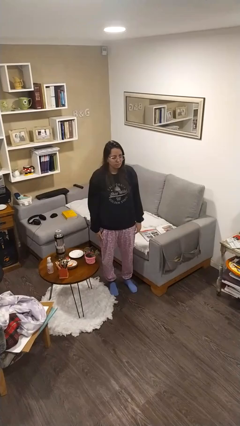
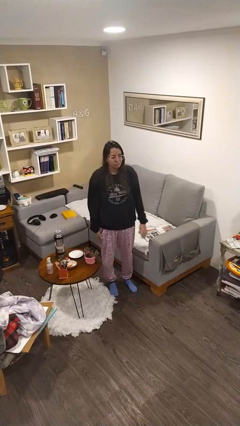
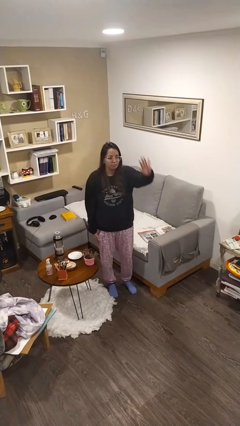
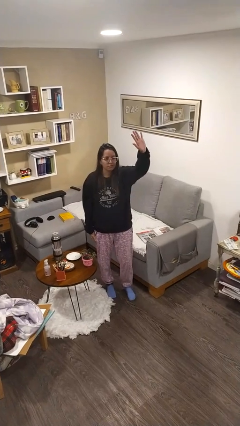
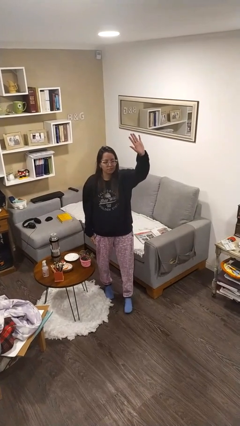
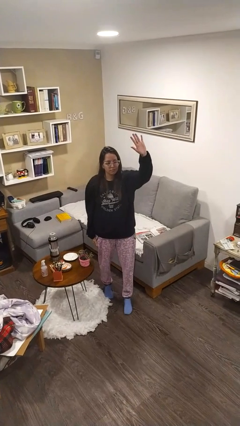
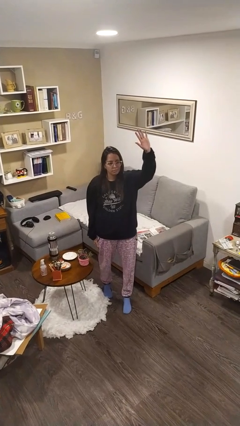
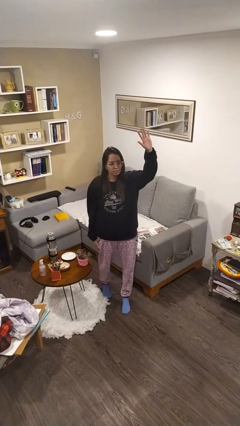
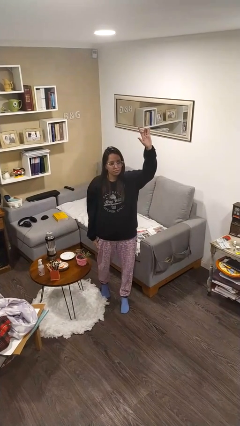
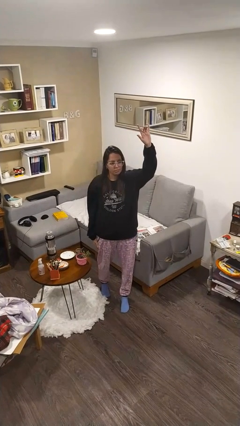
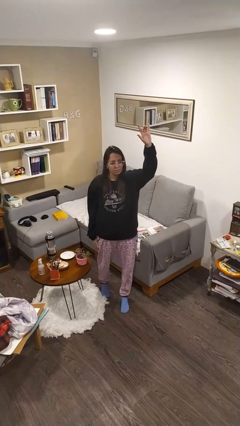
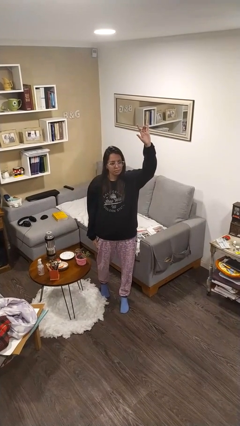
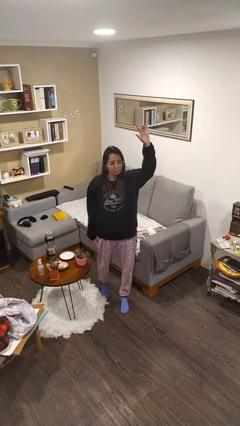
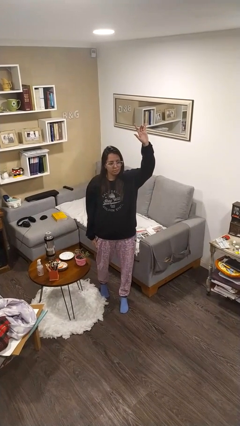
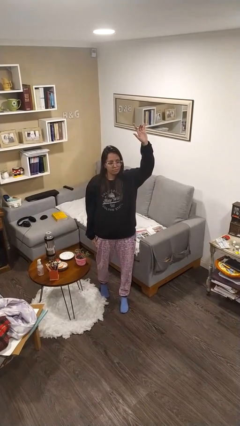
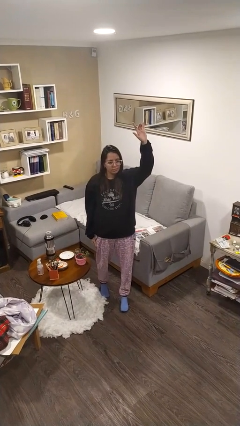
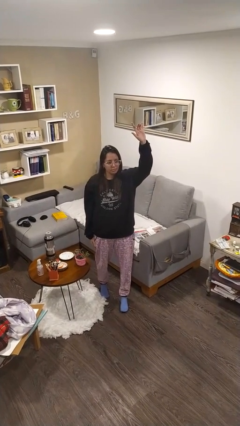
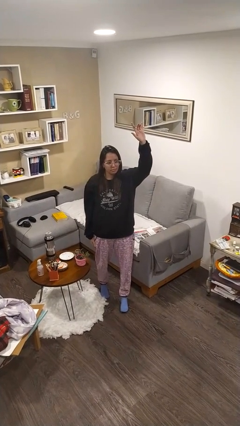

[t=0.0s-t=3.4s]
person gestures raise hand

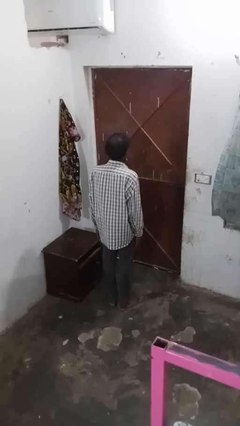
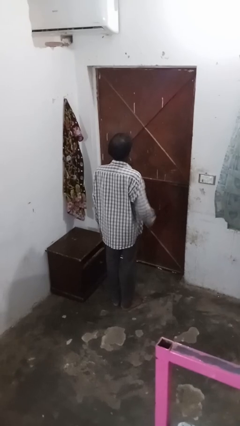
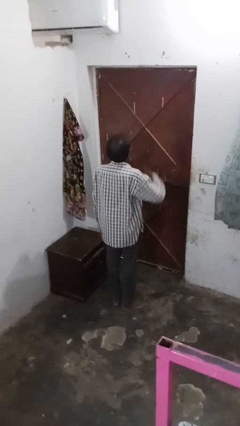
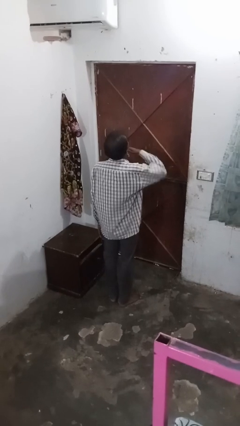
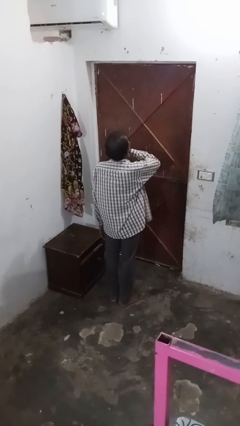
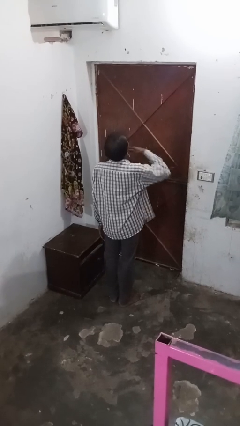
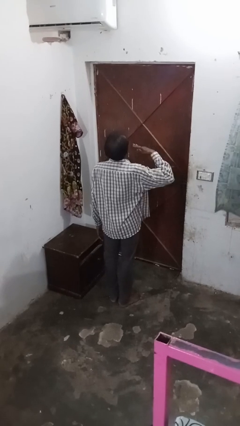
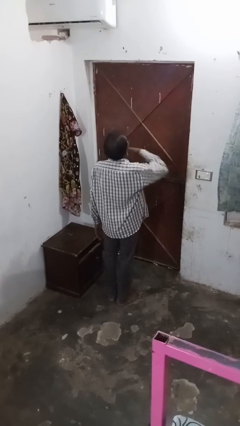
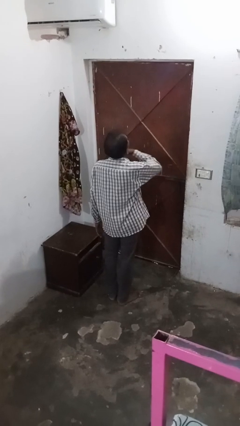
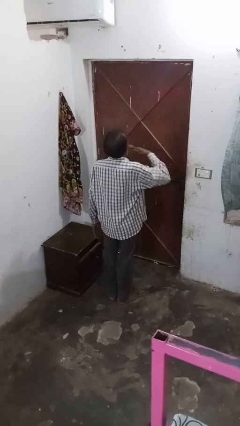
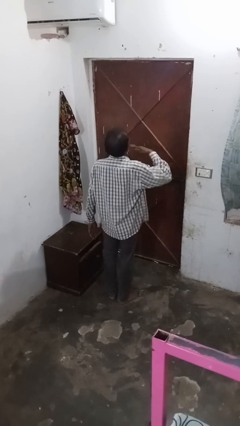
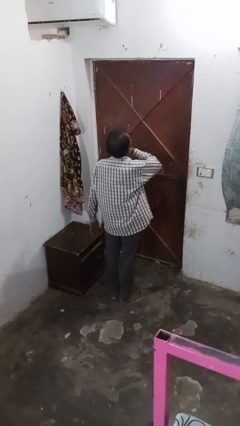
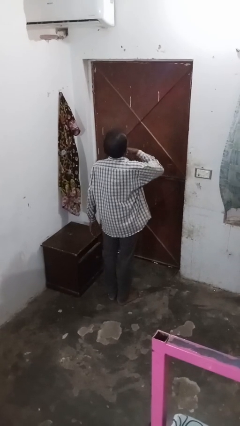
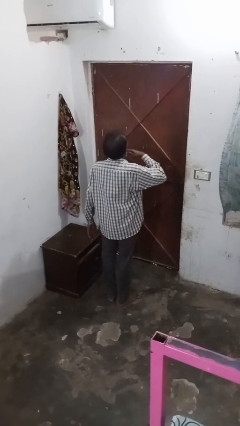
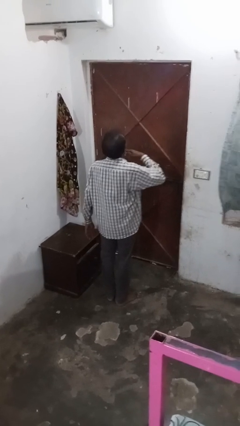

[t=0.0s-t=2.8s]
person gestures cut

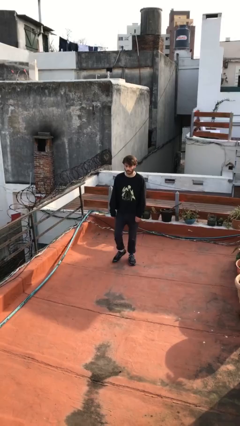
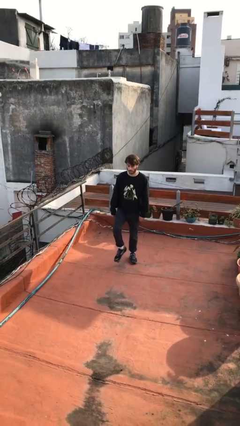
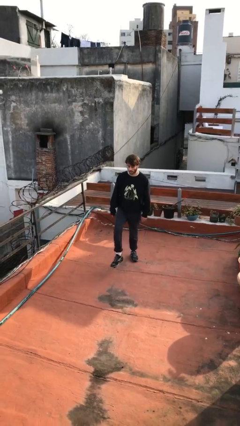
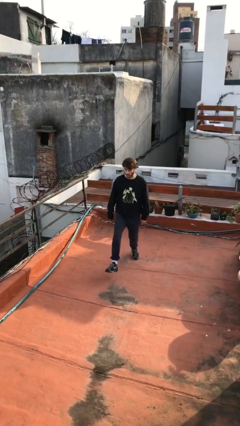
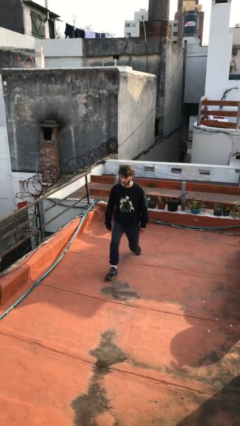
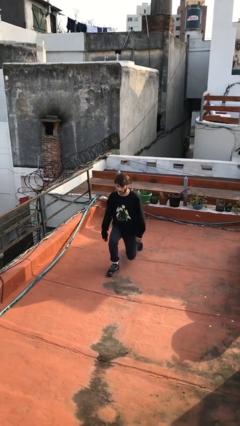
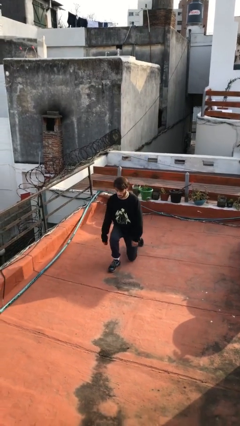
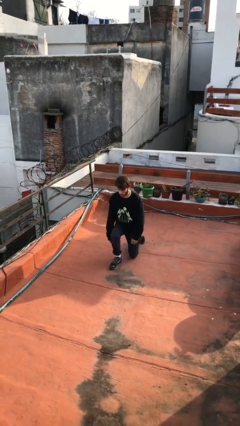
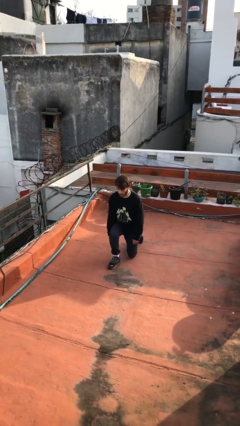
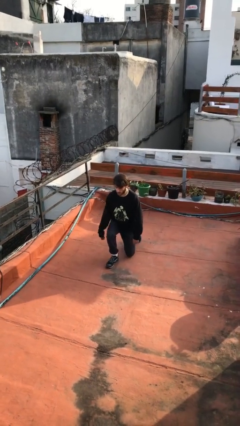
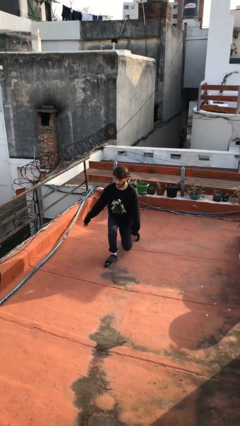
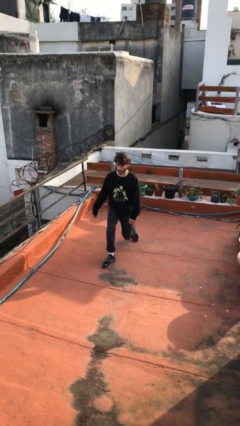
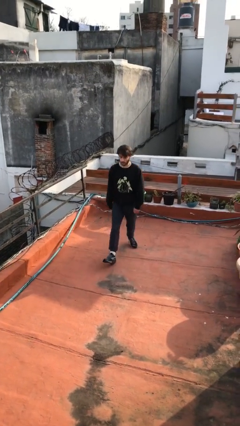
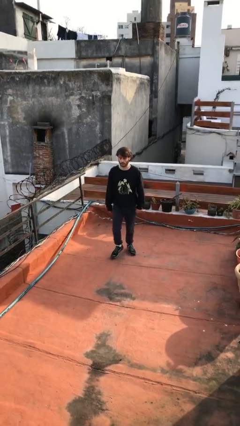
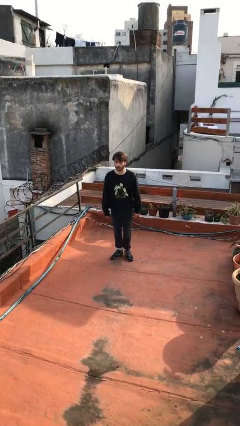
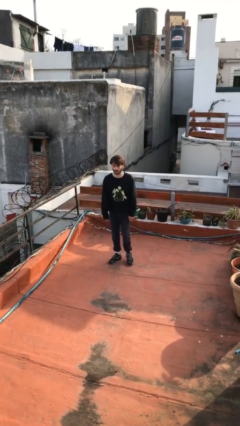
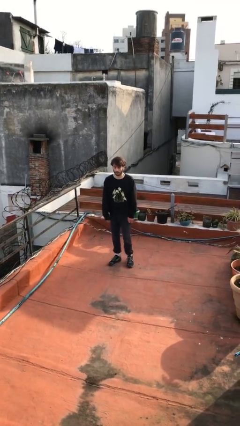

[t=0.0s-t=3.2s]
person exercises with lunges

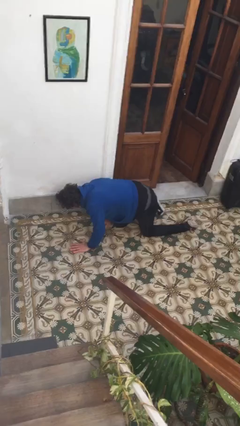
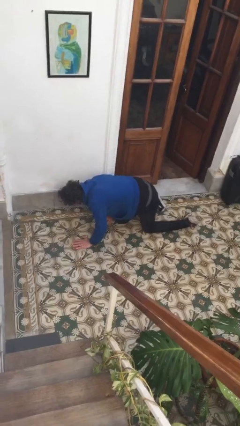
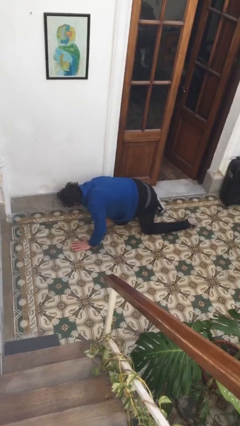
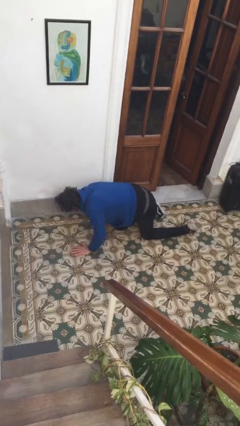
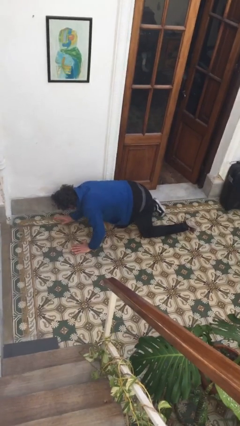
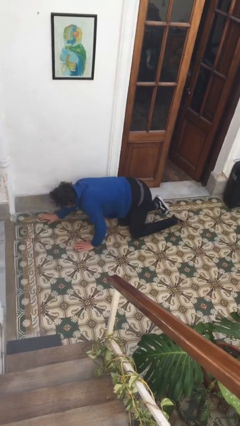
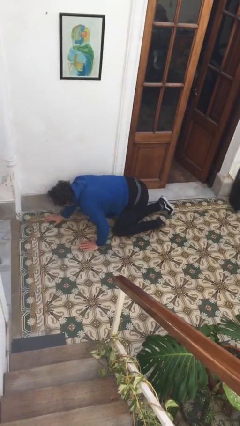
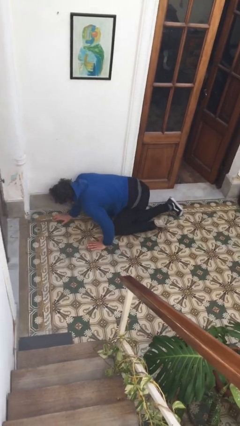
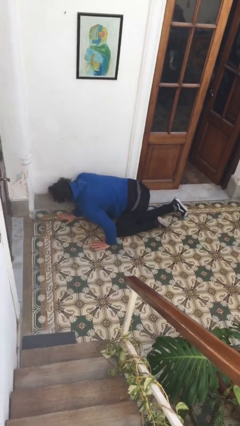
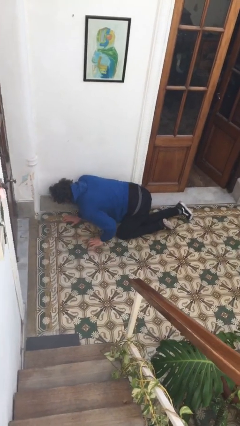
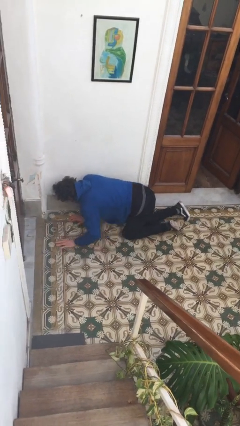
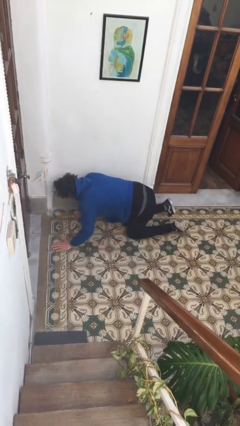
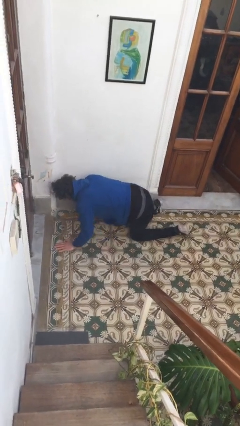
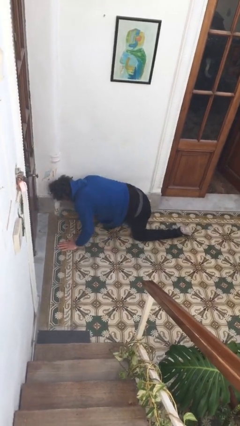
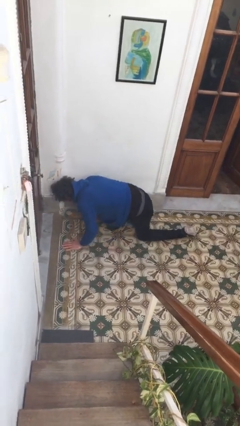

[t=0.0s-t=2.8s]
person crawls

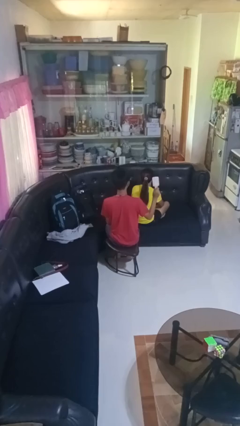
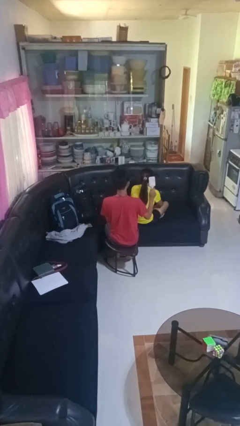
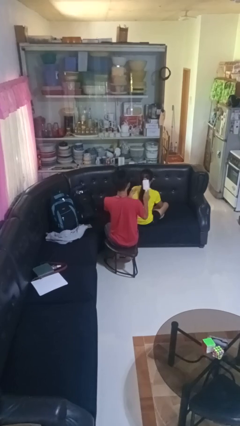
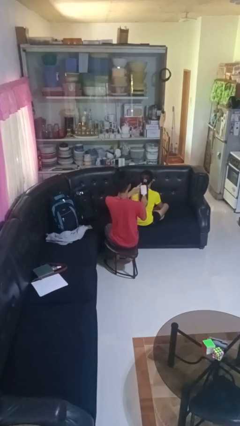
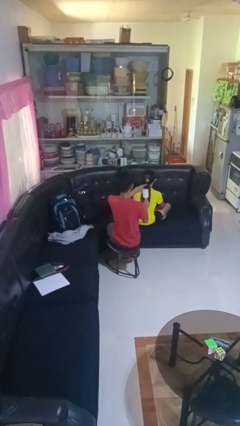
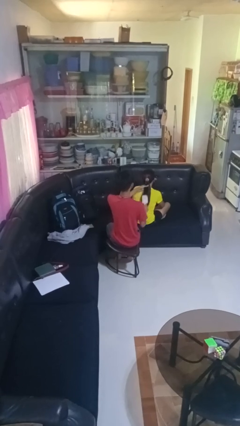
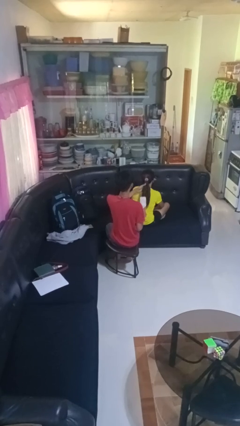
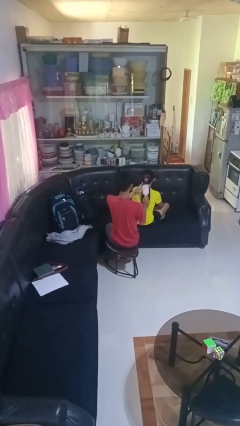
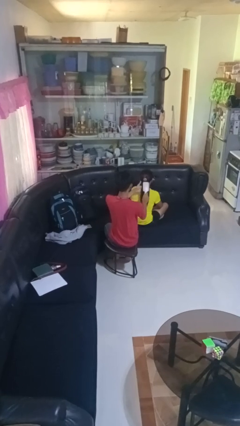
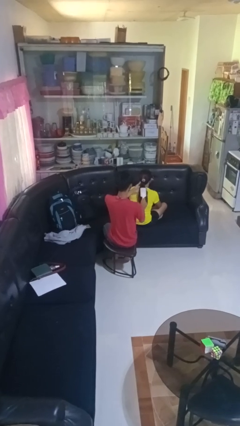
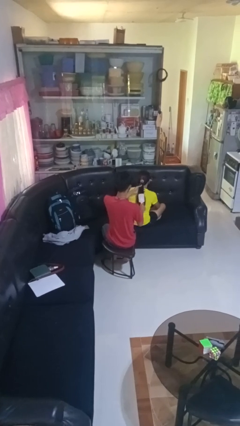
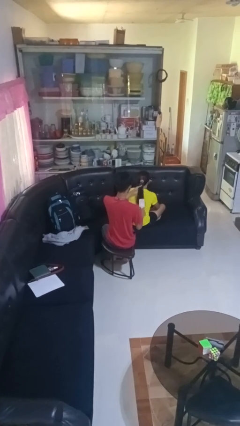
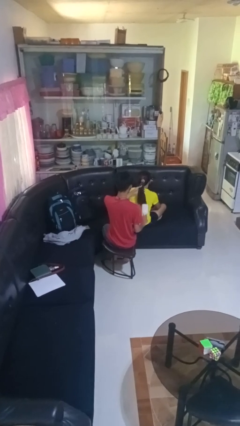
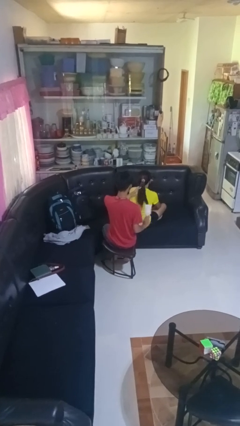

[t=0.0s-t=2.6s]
person brushes hair of person

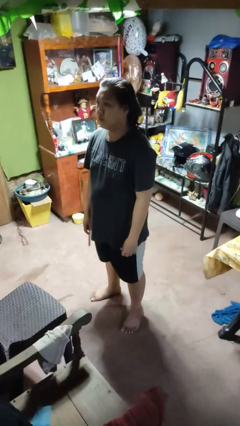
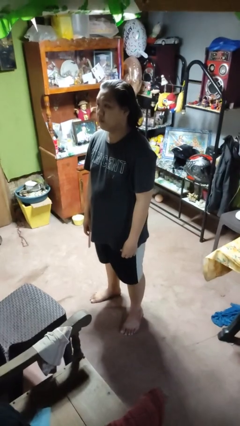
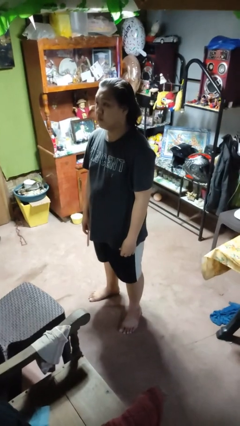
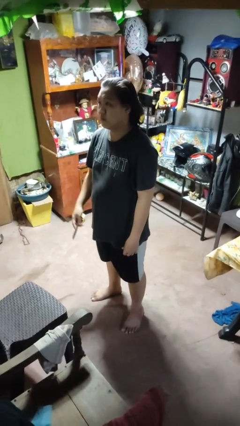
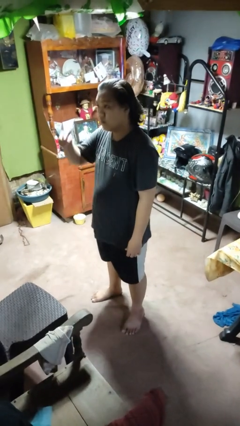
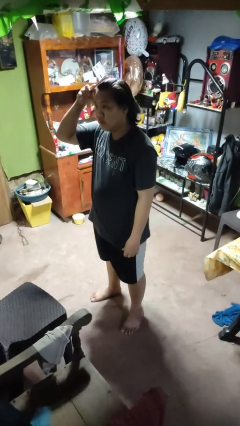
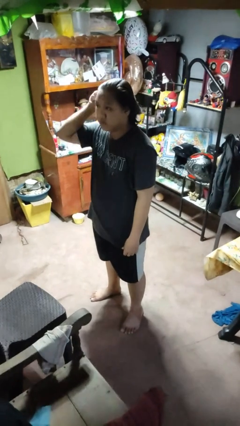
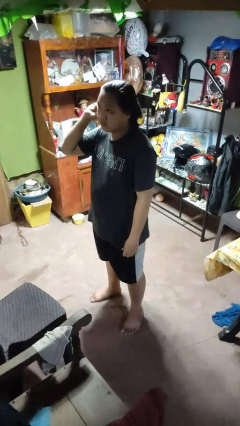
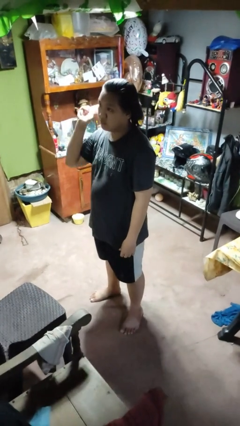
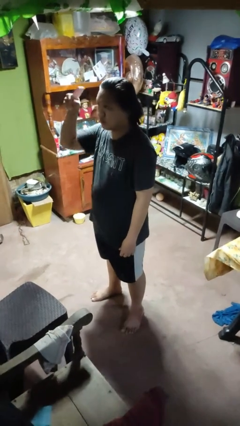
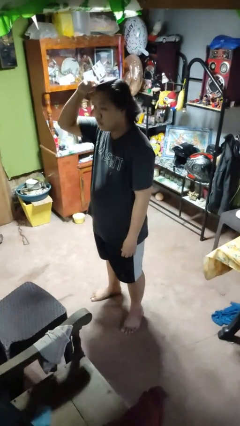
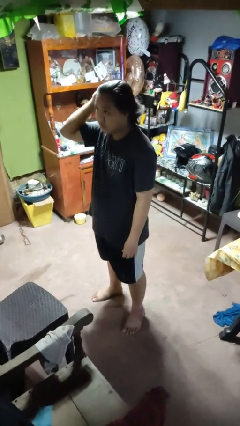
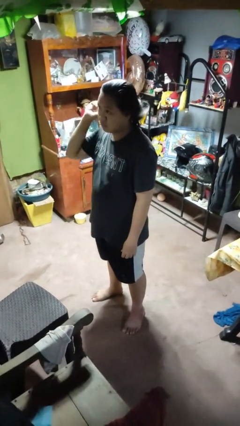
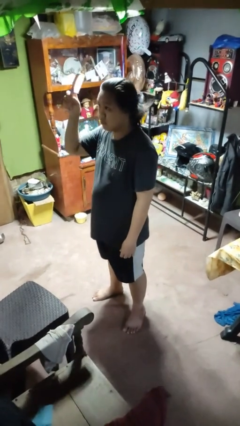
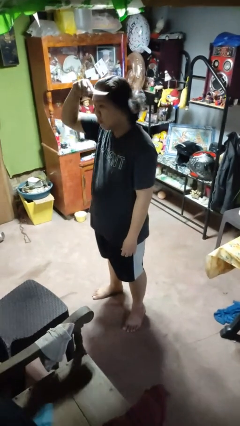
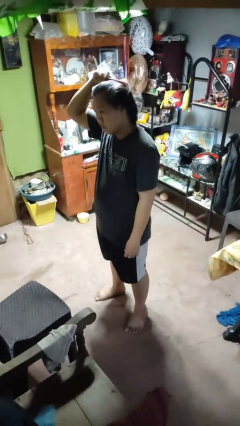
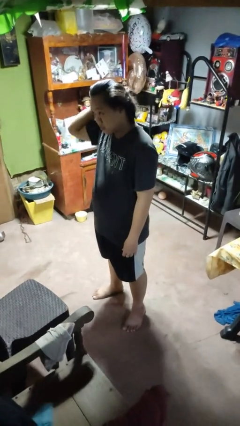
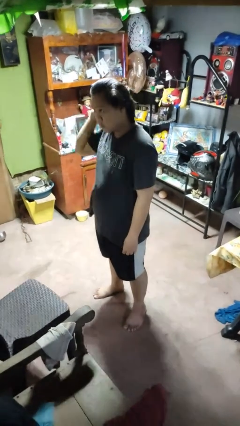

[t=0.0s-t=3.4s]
person brushes hair
